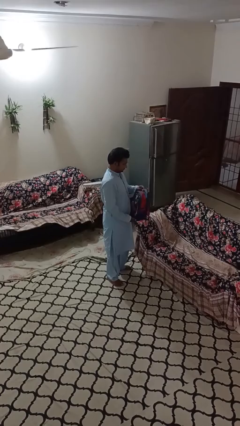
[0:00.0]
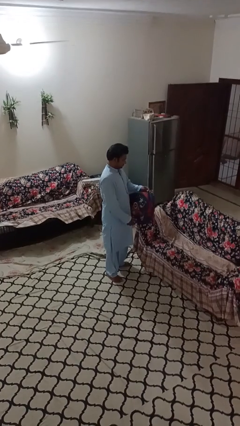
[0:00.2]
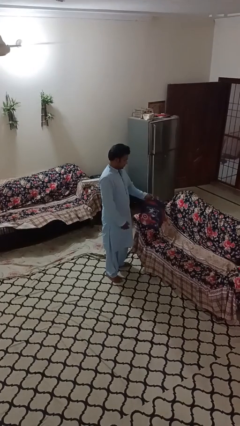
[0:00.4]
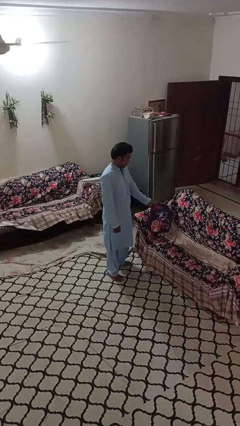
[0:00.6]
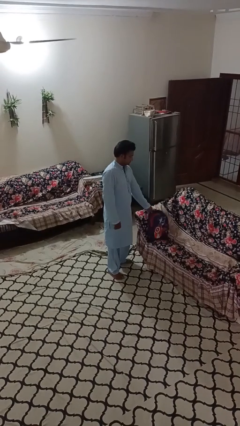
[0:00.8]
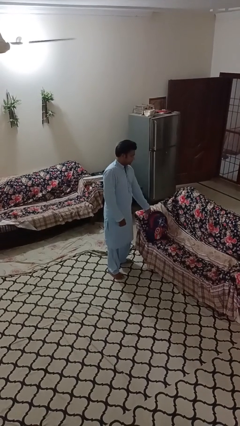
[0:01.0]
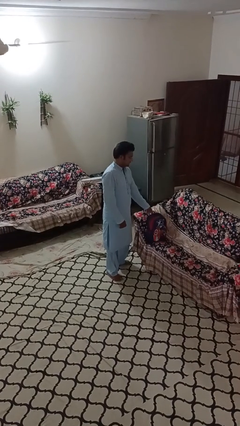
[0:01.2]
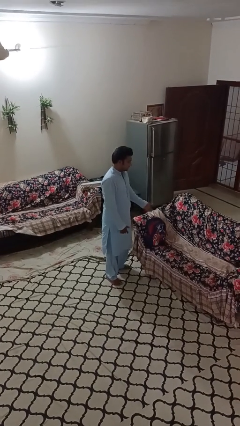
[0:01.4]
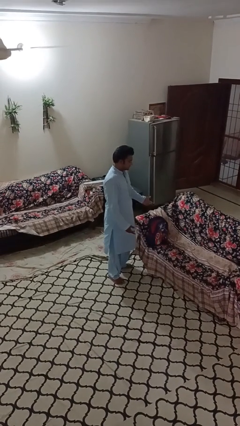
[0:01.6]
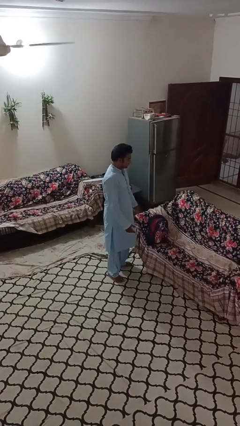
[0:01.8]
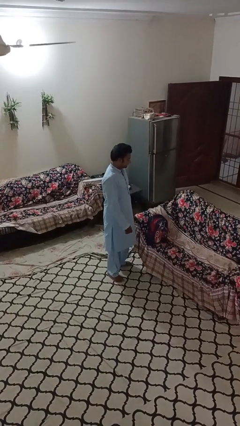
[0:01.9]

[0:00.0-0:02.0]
person puts down object on couch

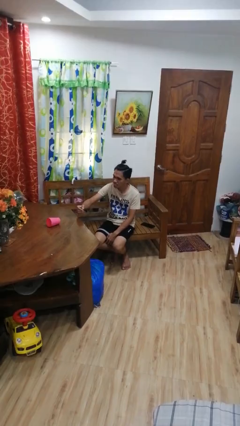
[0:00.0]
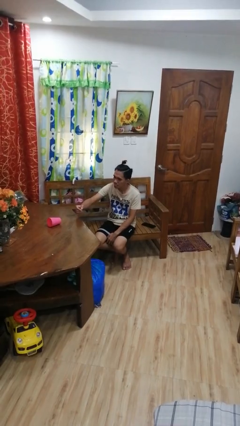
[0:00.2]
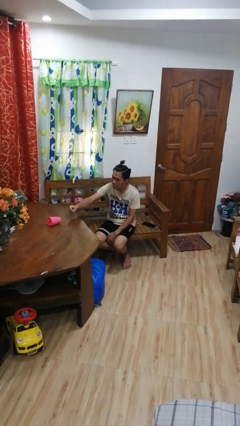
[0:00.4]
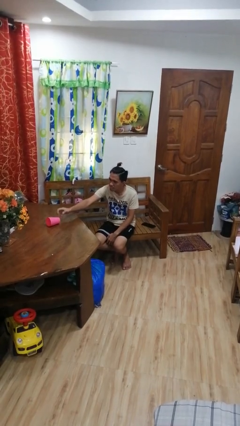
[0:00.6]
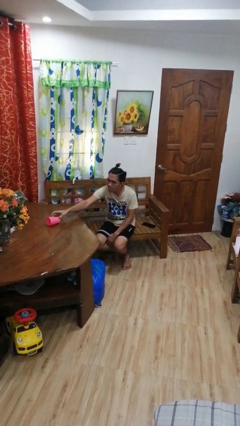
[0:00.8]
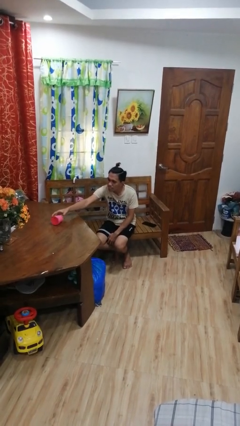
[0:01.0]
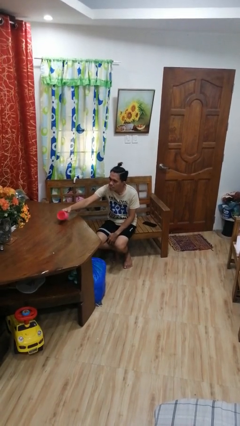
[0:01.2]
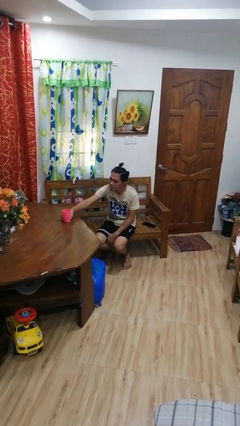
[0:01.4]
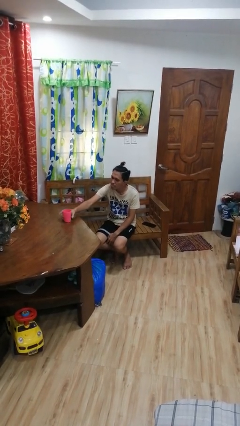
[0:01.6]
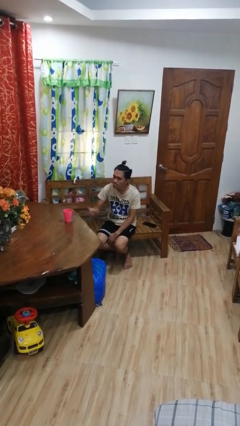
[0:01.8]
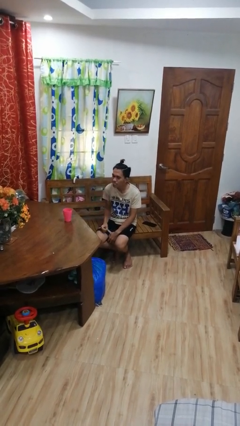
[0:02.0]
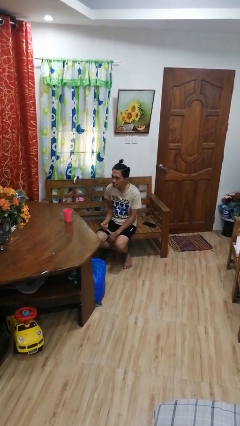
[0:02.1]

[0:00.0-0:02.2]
person sets upright glass

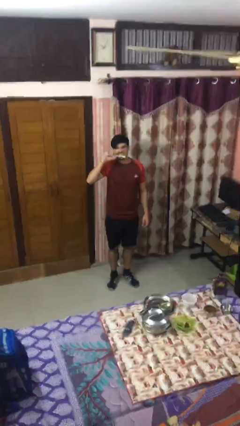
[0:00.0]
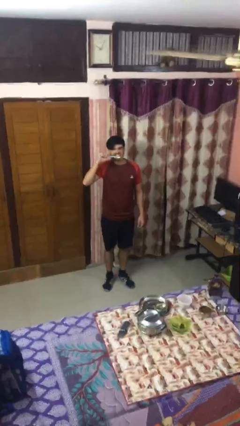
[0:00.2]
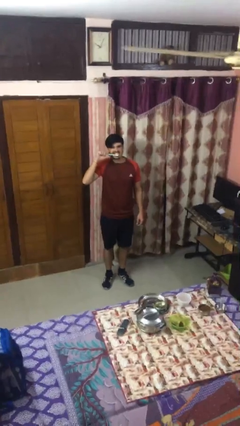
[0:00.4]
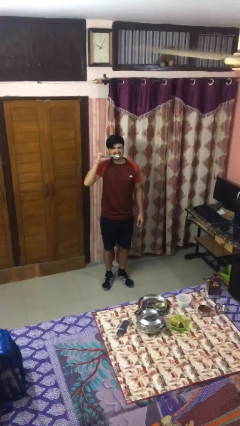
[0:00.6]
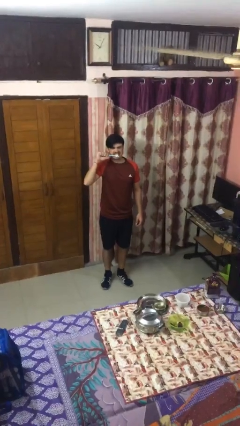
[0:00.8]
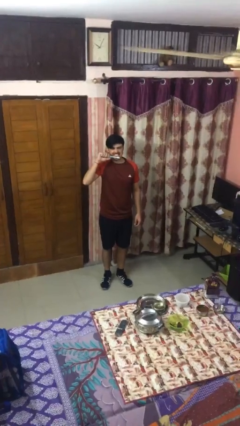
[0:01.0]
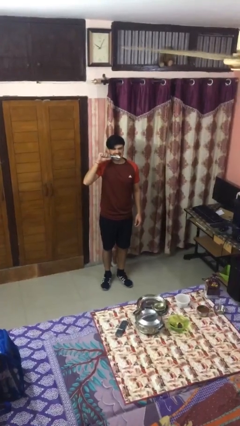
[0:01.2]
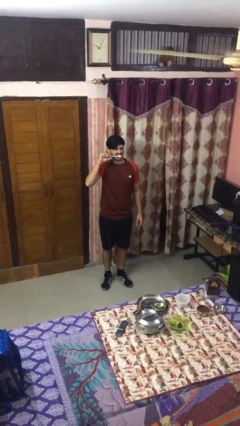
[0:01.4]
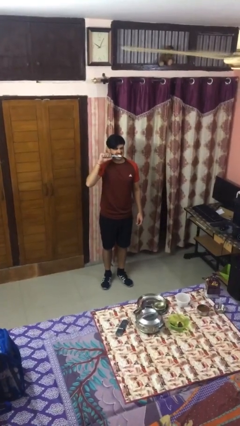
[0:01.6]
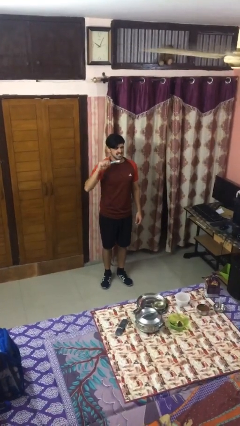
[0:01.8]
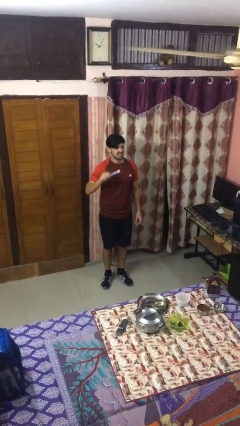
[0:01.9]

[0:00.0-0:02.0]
person brushes teeth

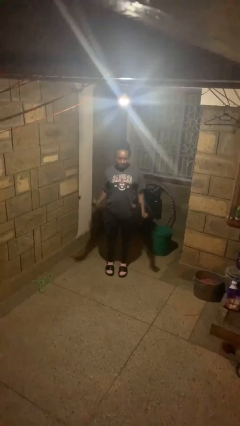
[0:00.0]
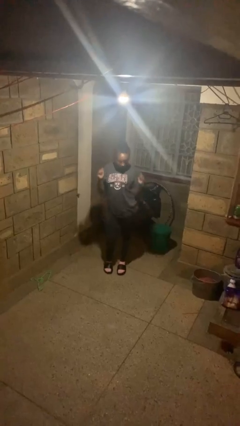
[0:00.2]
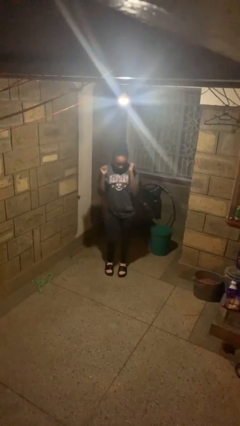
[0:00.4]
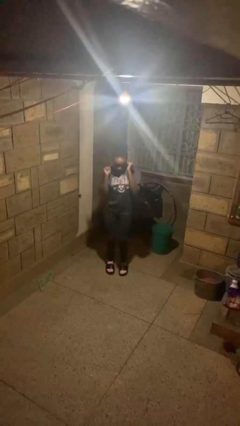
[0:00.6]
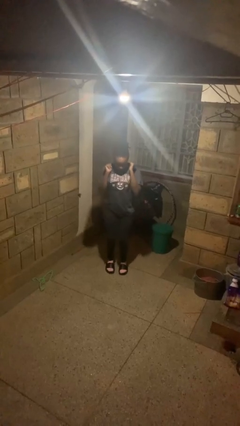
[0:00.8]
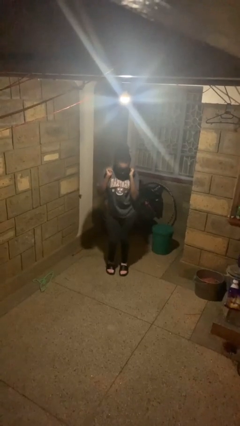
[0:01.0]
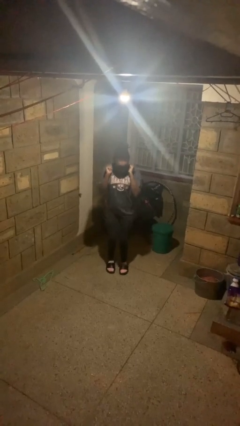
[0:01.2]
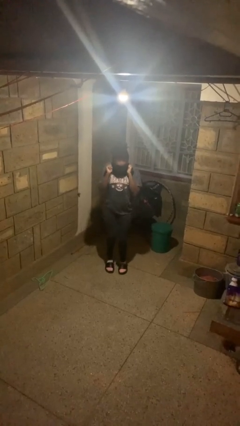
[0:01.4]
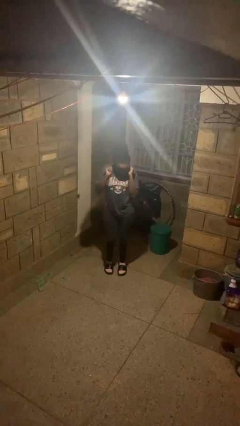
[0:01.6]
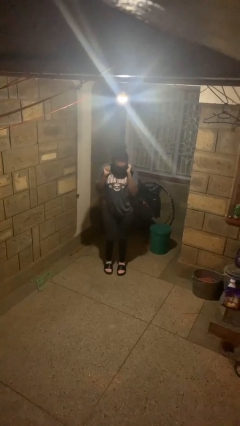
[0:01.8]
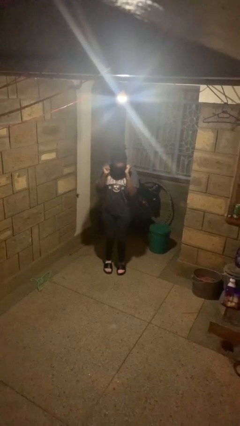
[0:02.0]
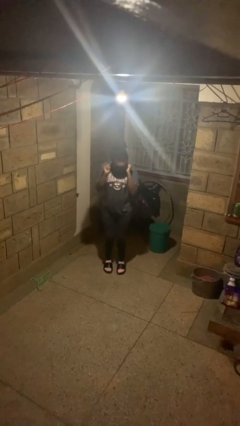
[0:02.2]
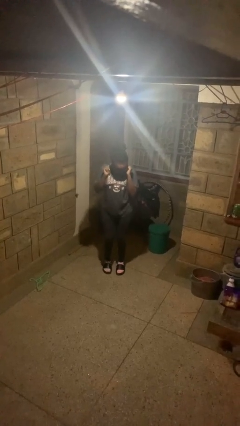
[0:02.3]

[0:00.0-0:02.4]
person wiggles hips

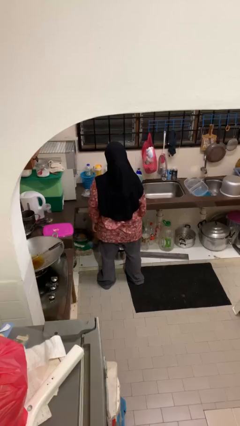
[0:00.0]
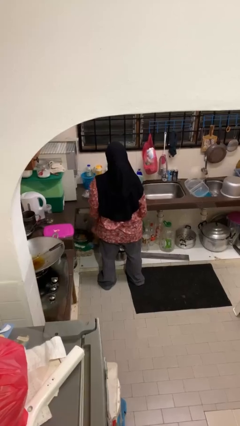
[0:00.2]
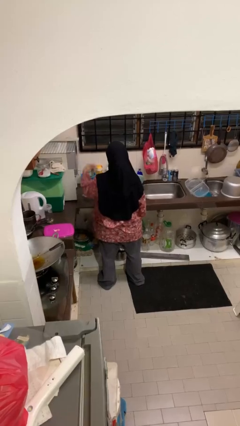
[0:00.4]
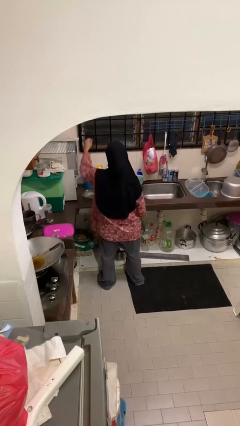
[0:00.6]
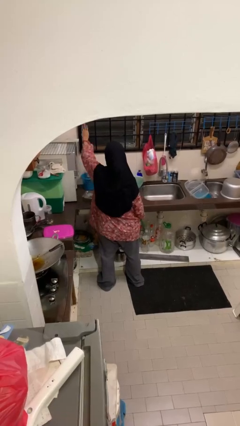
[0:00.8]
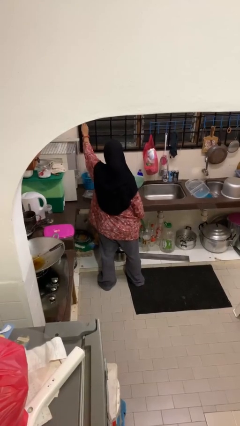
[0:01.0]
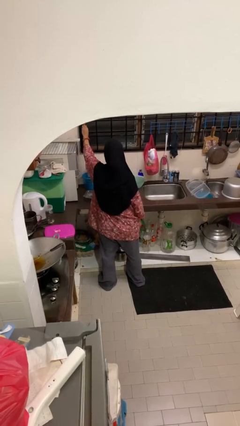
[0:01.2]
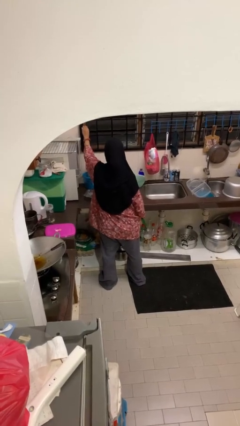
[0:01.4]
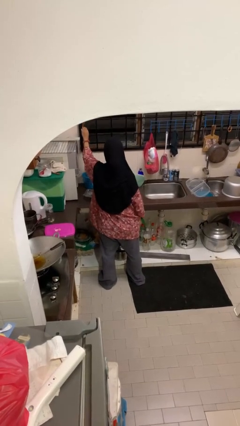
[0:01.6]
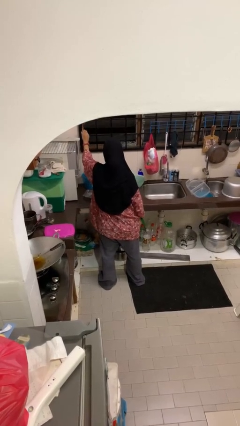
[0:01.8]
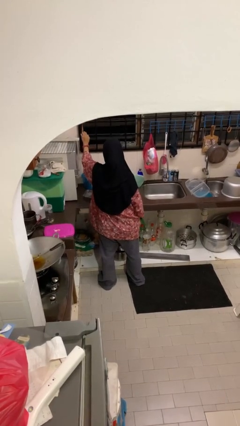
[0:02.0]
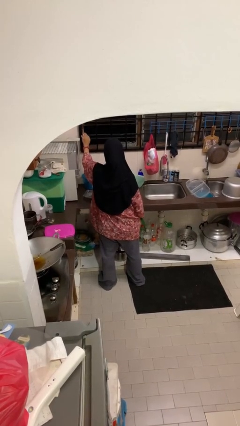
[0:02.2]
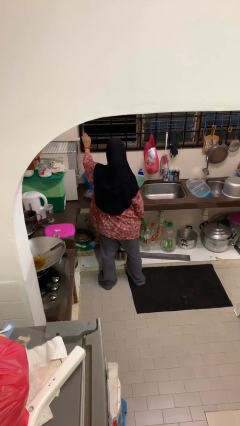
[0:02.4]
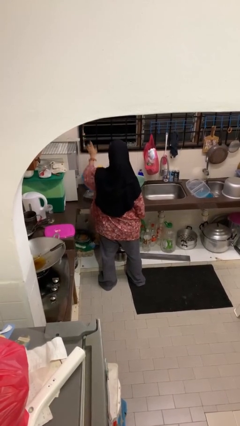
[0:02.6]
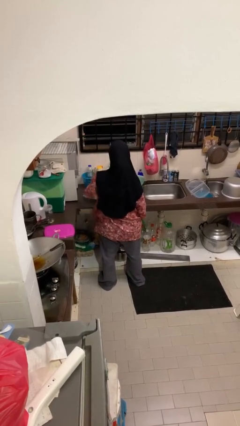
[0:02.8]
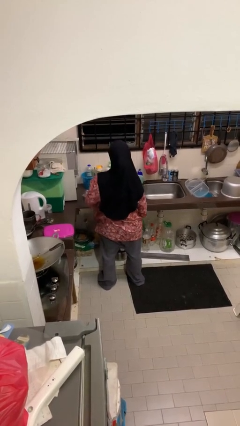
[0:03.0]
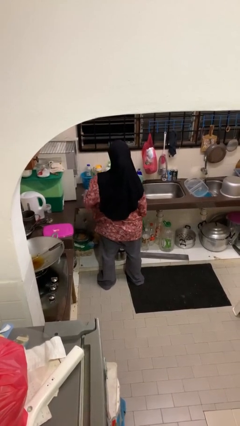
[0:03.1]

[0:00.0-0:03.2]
person opens home window

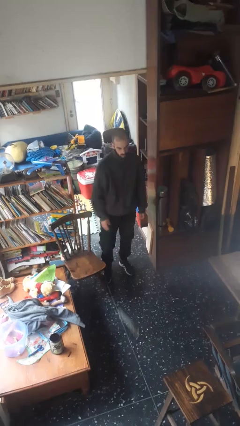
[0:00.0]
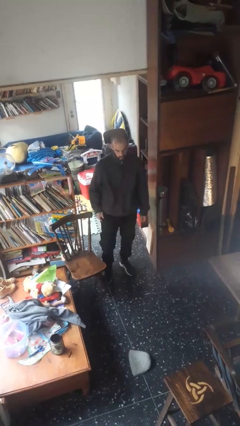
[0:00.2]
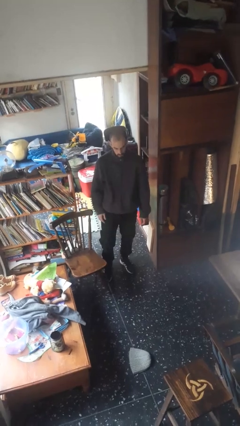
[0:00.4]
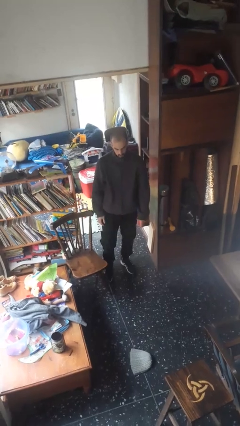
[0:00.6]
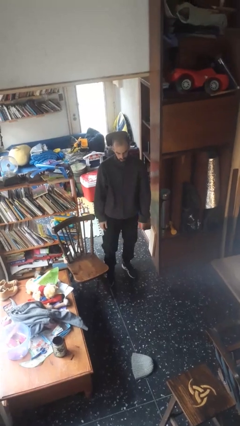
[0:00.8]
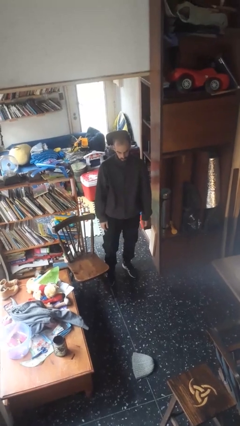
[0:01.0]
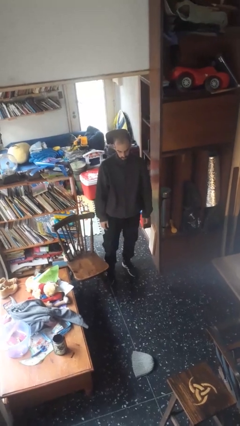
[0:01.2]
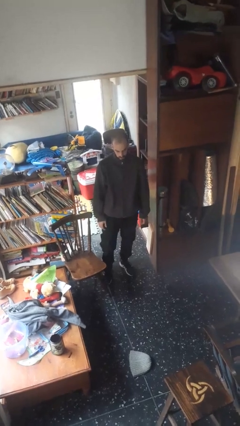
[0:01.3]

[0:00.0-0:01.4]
person throws object to ground

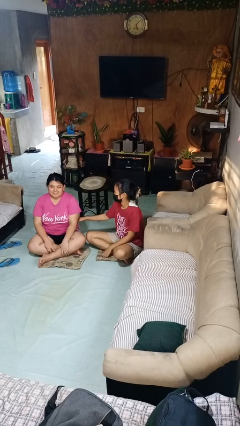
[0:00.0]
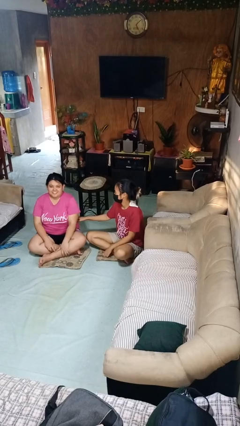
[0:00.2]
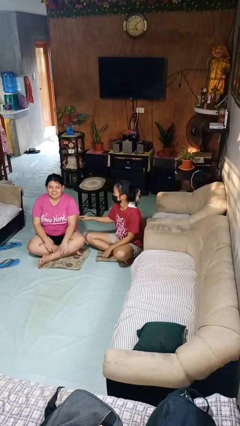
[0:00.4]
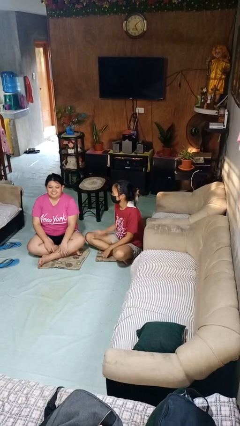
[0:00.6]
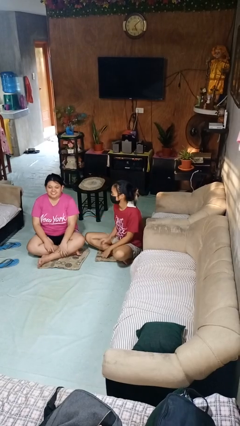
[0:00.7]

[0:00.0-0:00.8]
person tickles person

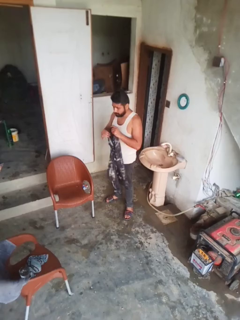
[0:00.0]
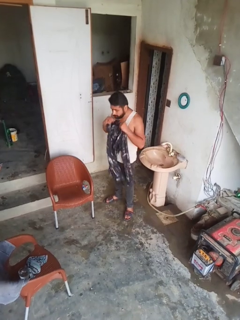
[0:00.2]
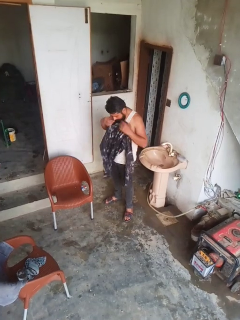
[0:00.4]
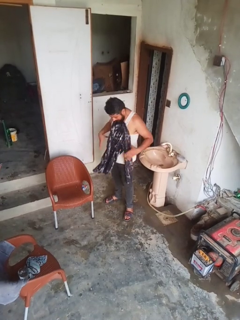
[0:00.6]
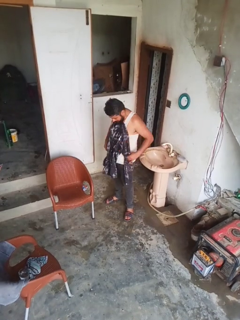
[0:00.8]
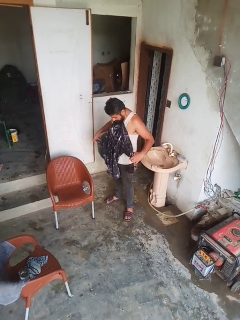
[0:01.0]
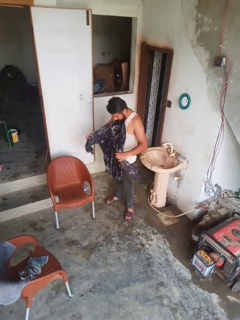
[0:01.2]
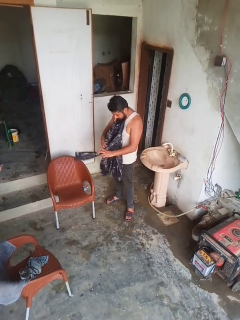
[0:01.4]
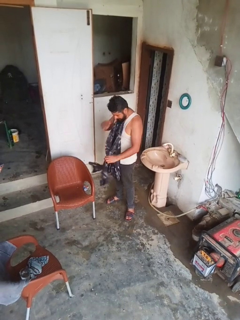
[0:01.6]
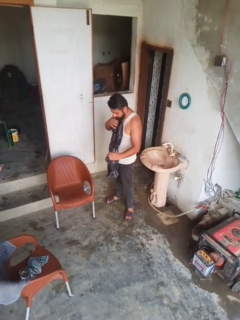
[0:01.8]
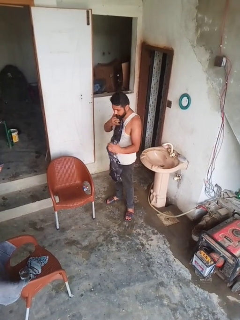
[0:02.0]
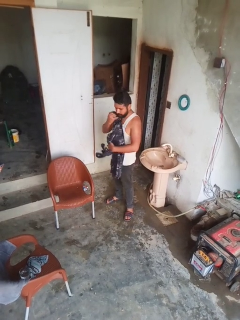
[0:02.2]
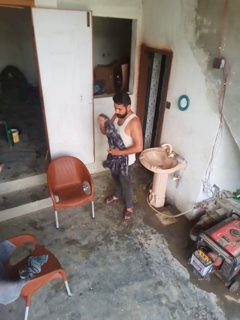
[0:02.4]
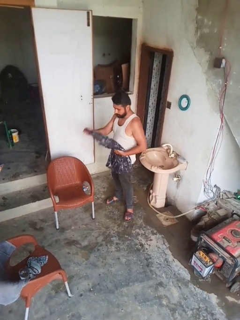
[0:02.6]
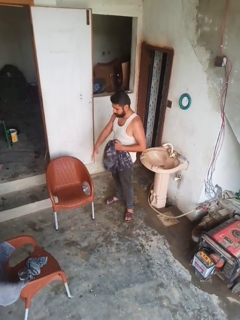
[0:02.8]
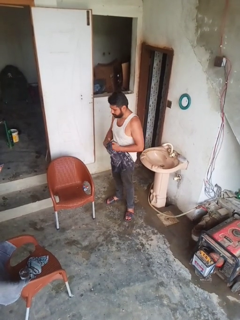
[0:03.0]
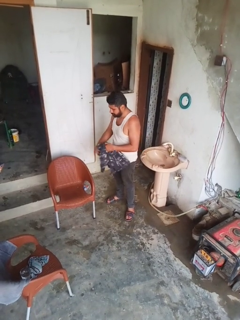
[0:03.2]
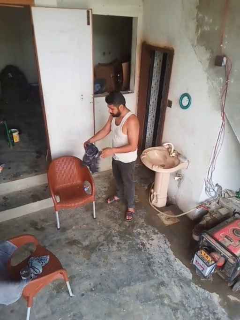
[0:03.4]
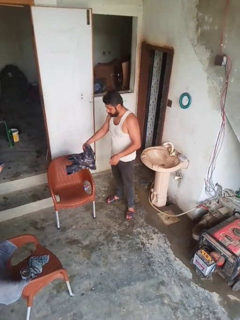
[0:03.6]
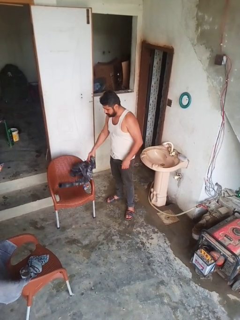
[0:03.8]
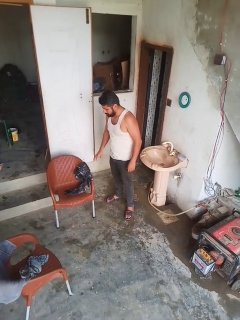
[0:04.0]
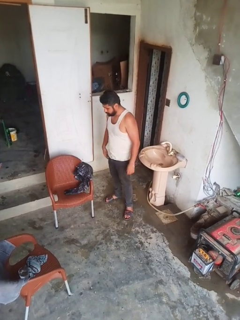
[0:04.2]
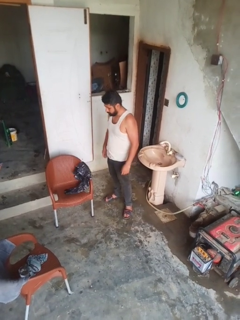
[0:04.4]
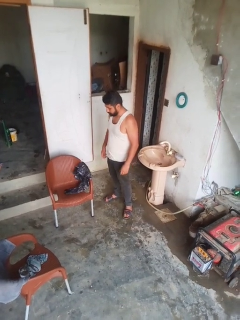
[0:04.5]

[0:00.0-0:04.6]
person folds shirt
